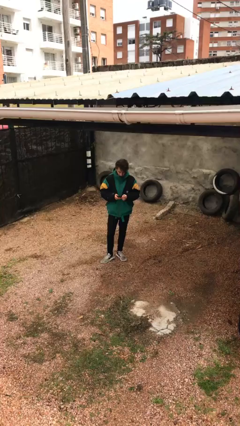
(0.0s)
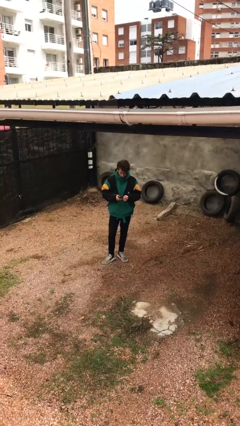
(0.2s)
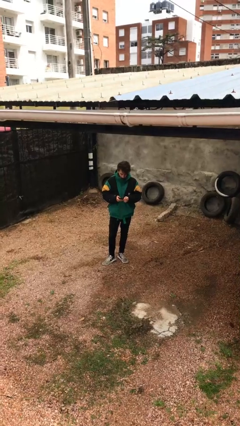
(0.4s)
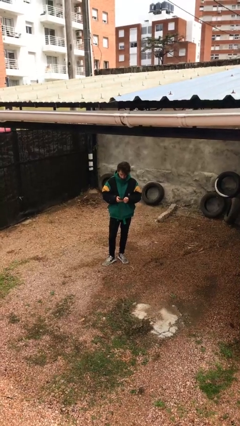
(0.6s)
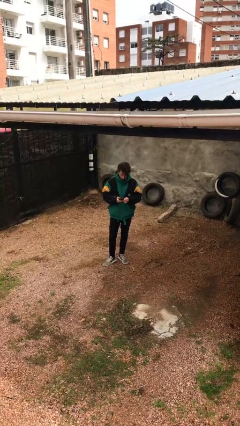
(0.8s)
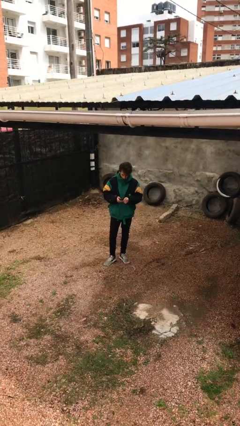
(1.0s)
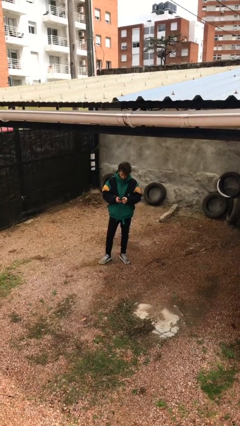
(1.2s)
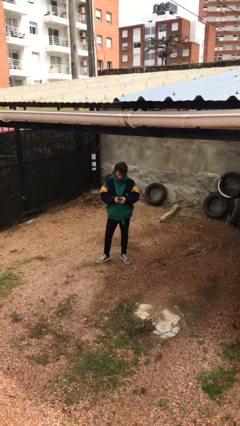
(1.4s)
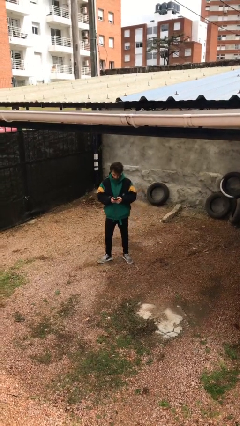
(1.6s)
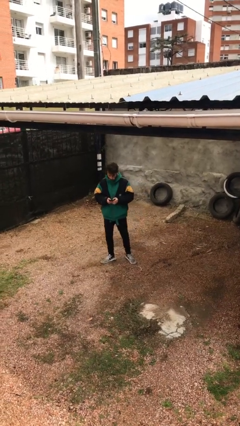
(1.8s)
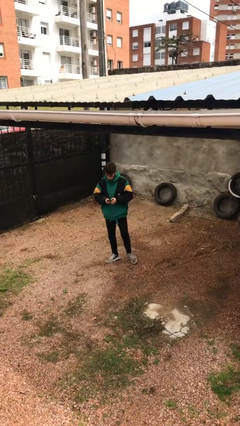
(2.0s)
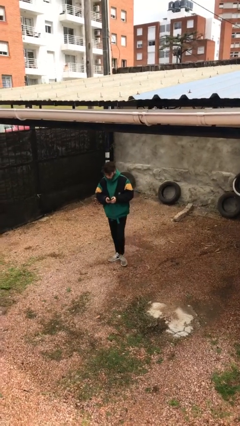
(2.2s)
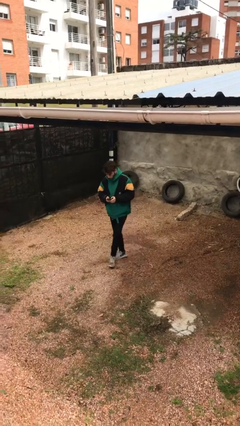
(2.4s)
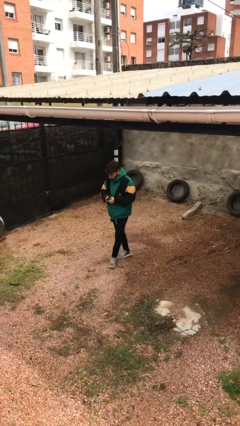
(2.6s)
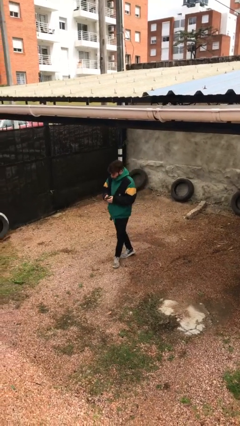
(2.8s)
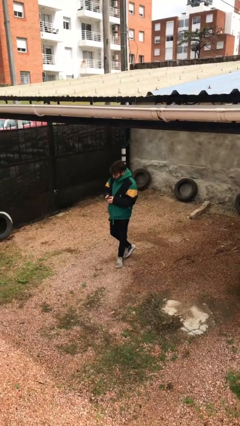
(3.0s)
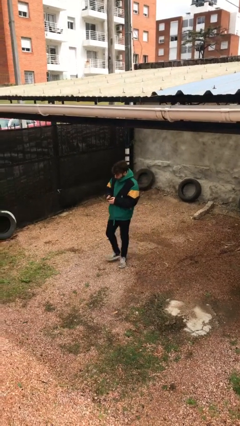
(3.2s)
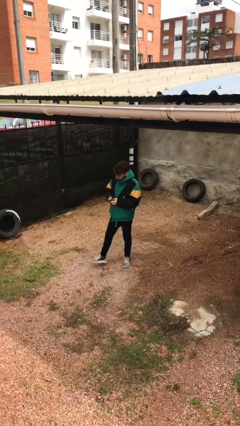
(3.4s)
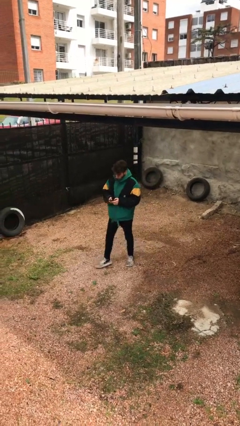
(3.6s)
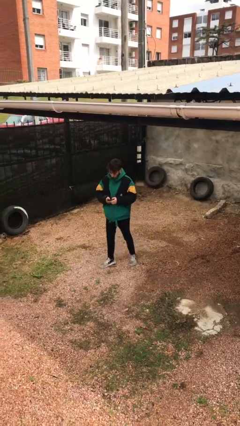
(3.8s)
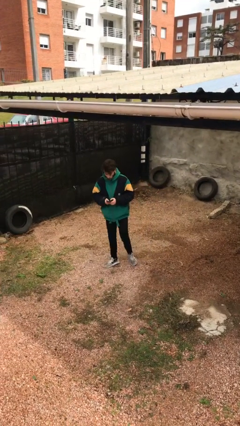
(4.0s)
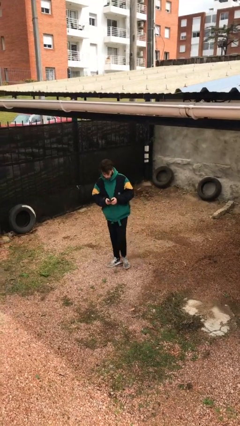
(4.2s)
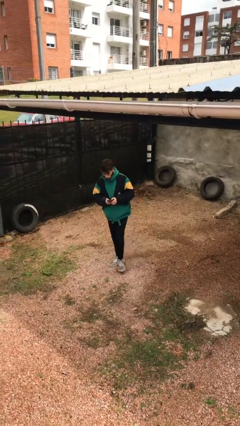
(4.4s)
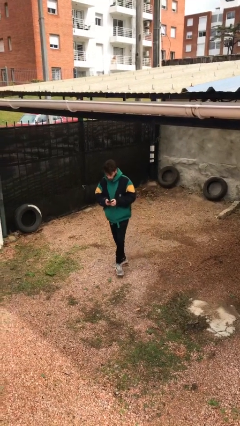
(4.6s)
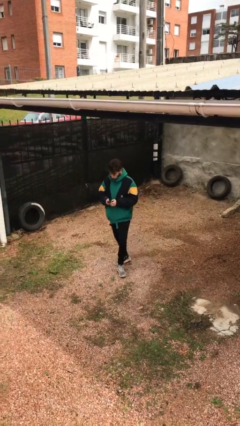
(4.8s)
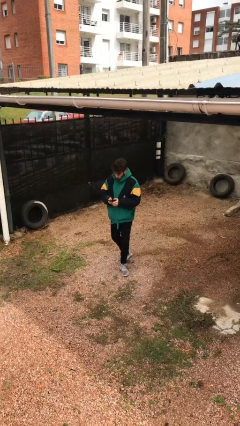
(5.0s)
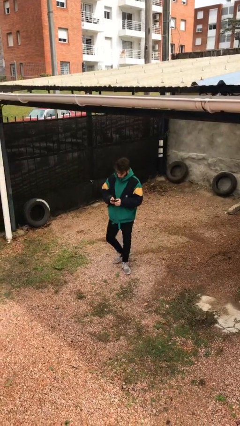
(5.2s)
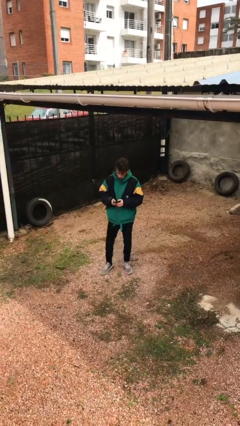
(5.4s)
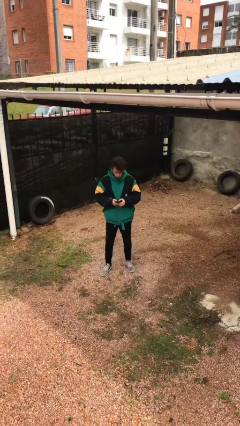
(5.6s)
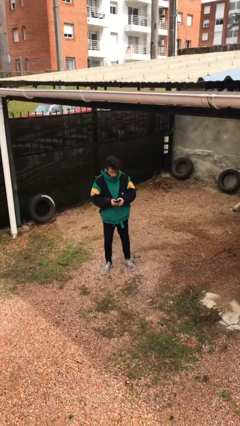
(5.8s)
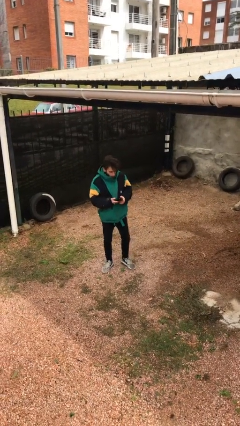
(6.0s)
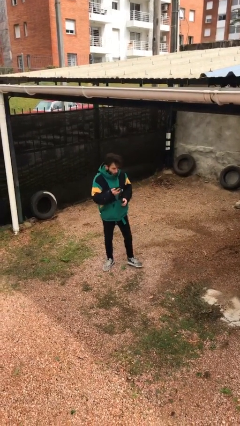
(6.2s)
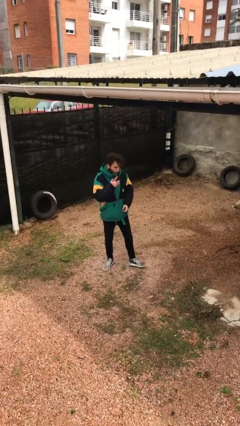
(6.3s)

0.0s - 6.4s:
person texts on phone

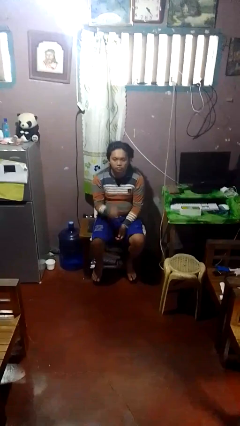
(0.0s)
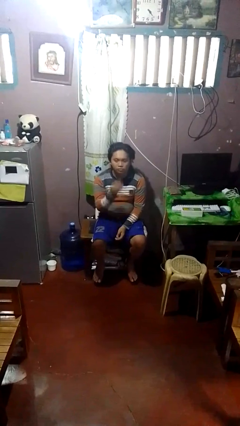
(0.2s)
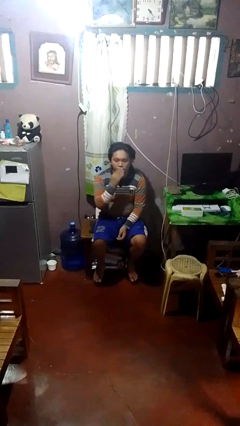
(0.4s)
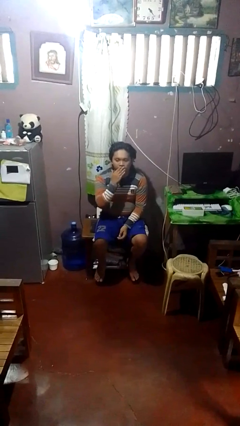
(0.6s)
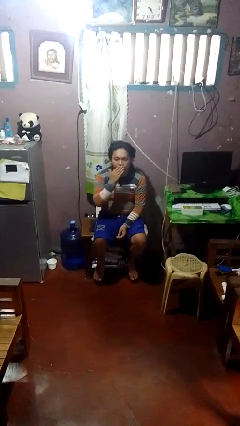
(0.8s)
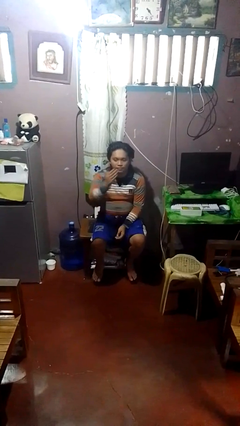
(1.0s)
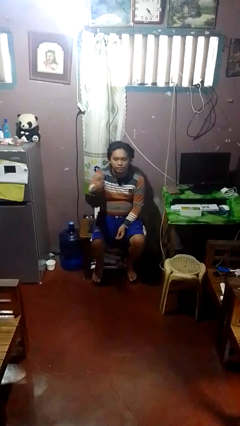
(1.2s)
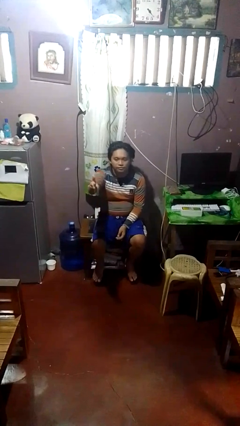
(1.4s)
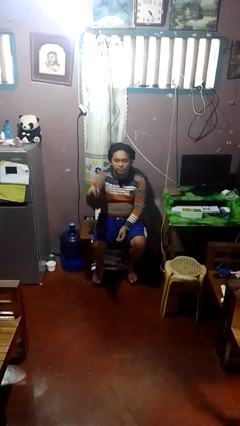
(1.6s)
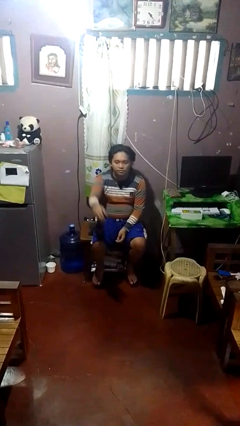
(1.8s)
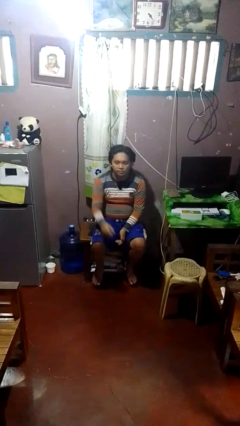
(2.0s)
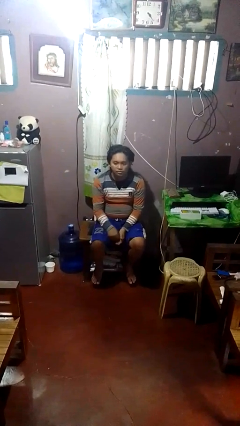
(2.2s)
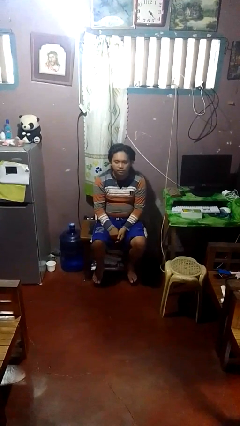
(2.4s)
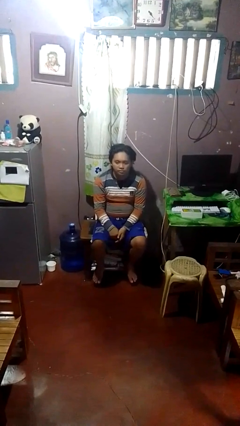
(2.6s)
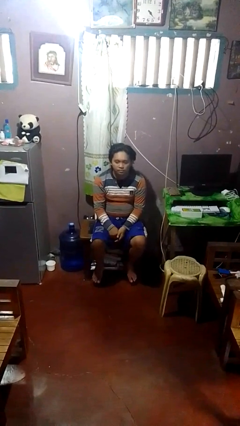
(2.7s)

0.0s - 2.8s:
person gestures blow kiss

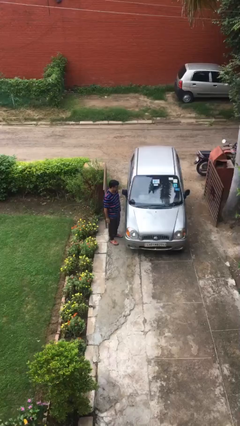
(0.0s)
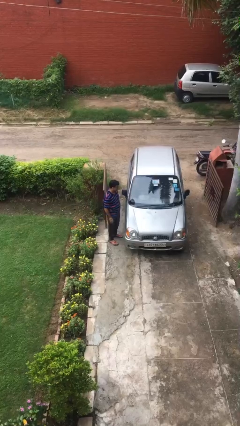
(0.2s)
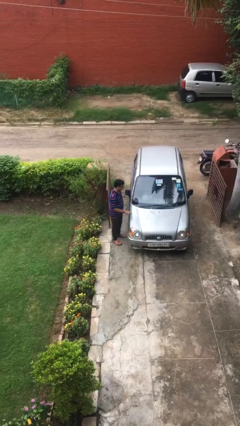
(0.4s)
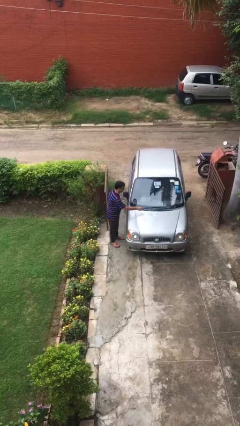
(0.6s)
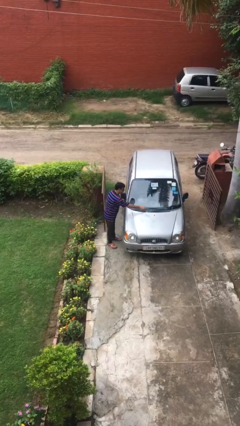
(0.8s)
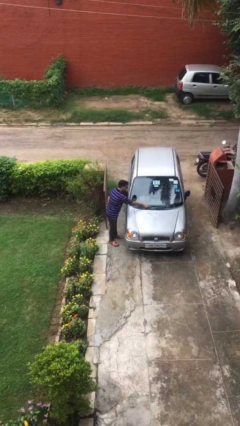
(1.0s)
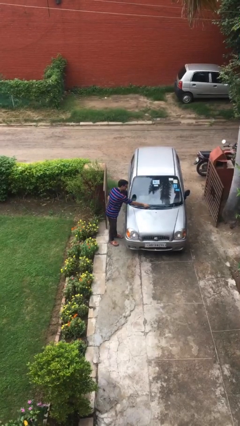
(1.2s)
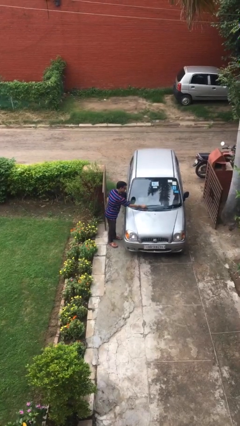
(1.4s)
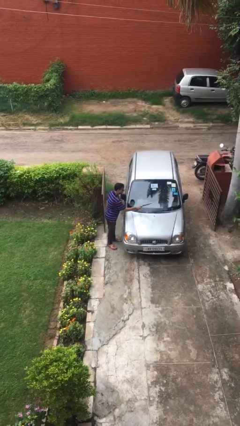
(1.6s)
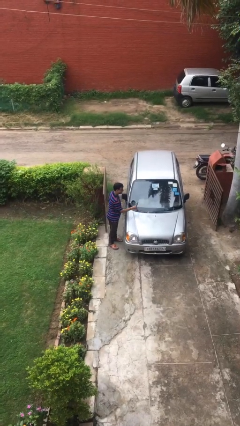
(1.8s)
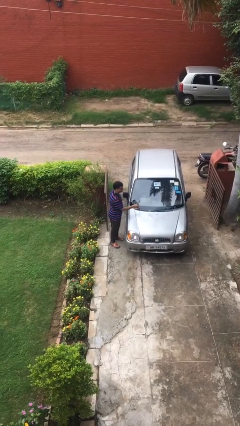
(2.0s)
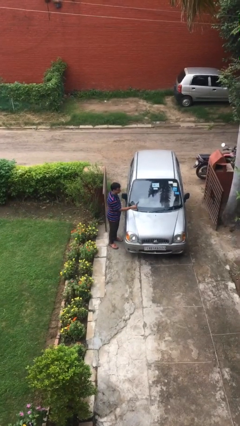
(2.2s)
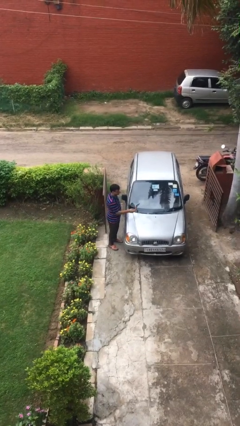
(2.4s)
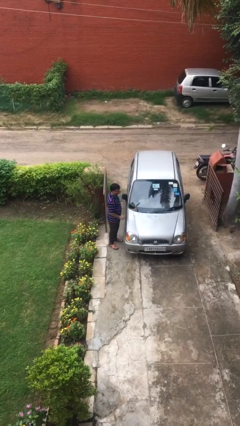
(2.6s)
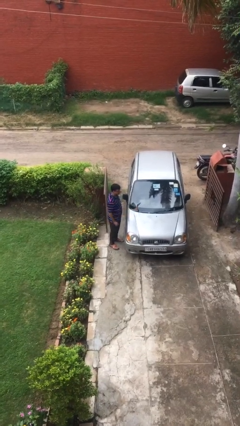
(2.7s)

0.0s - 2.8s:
person flips up car wipers

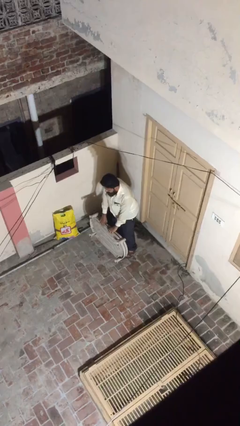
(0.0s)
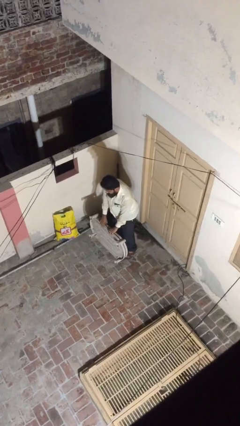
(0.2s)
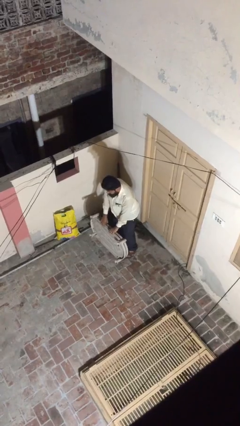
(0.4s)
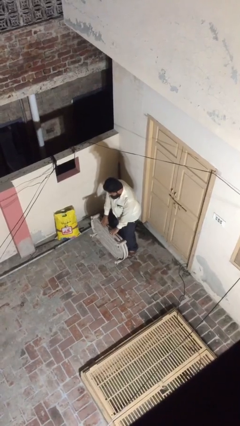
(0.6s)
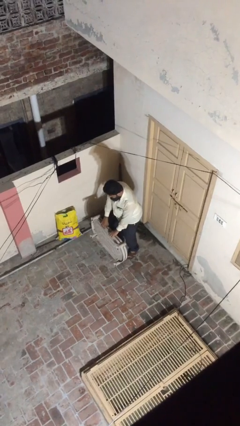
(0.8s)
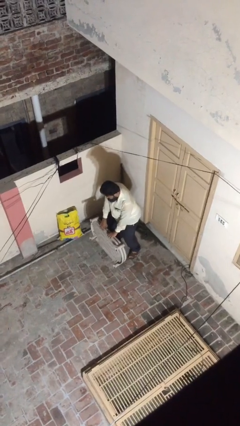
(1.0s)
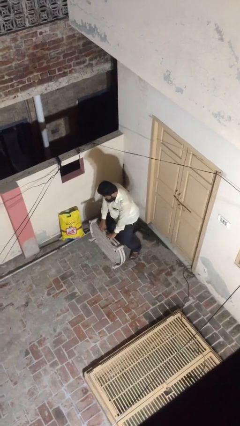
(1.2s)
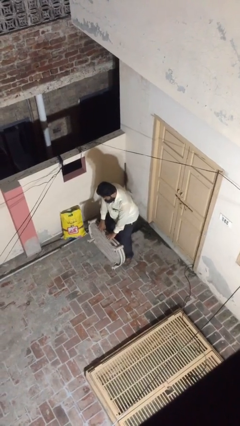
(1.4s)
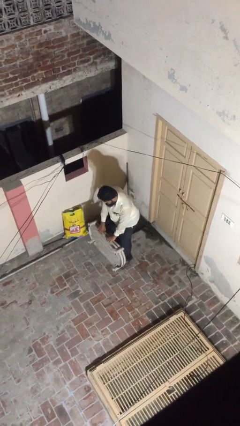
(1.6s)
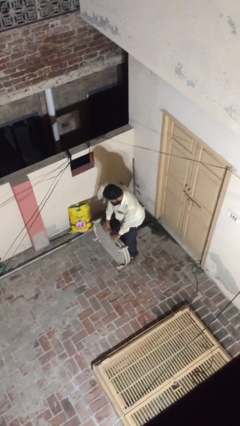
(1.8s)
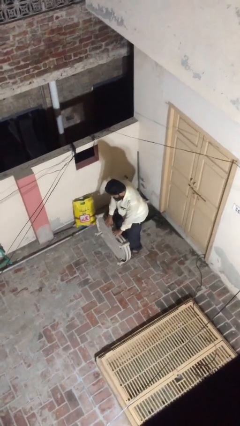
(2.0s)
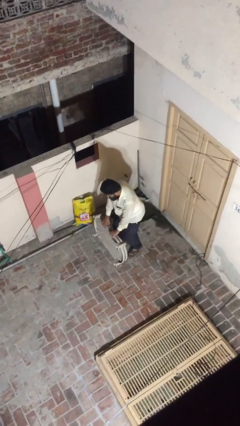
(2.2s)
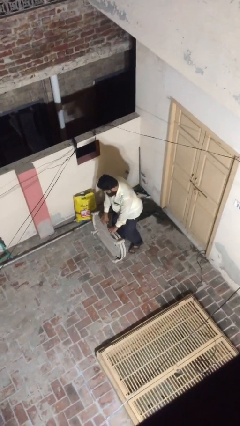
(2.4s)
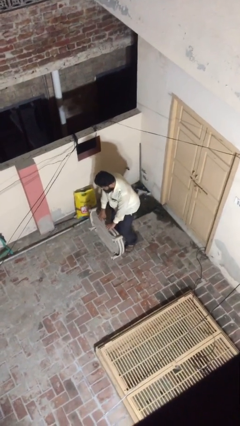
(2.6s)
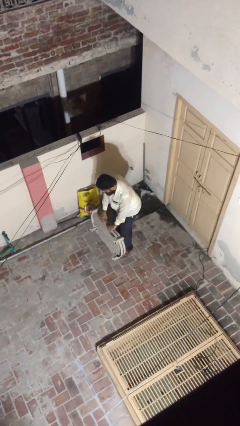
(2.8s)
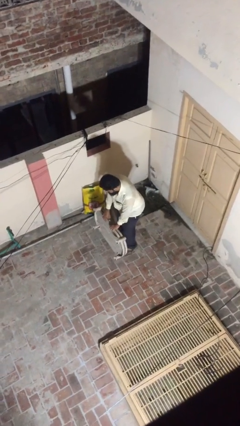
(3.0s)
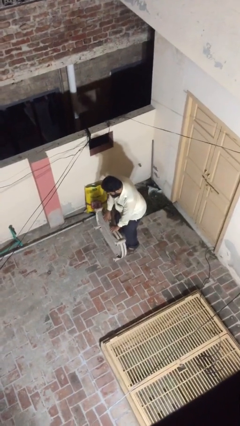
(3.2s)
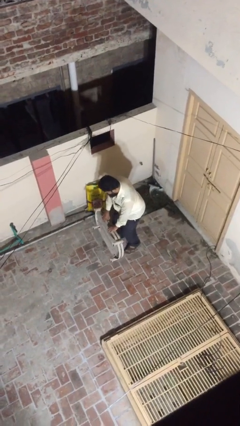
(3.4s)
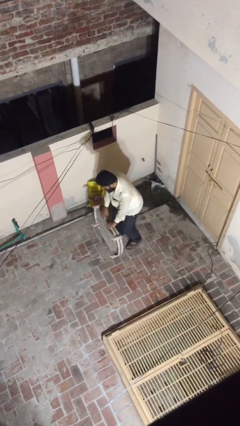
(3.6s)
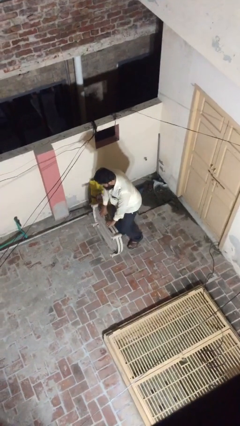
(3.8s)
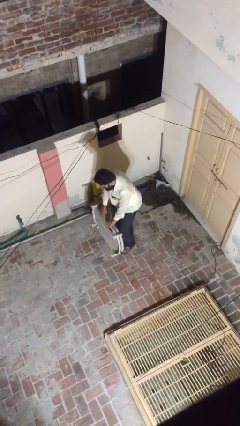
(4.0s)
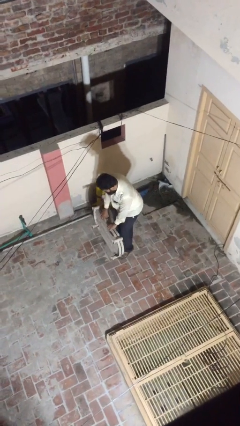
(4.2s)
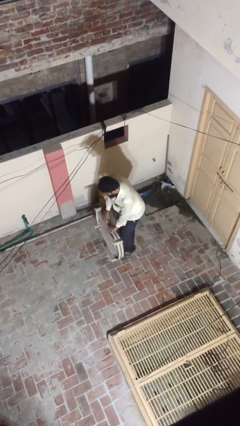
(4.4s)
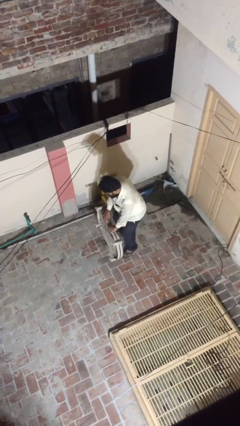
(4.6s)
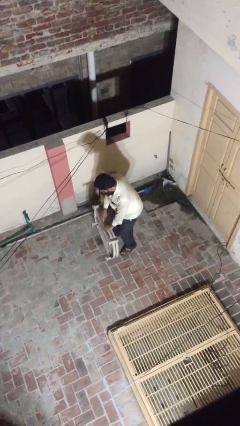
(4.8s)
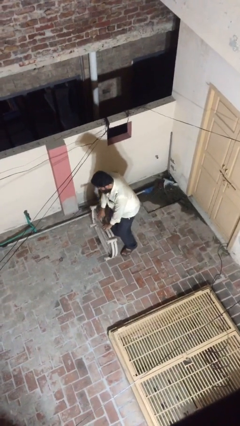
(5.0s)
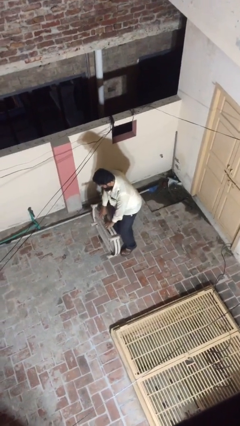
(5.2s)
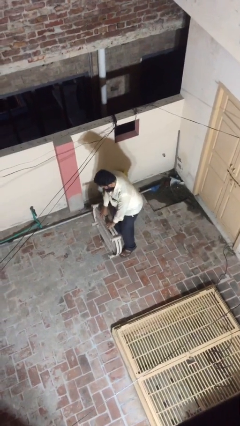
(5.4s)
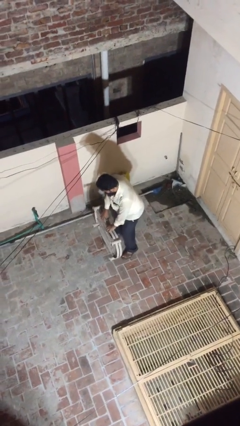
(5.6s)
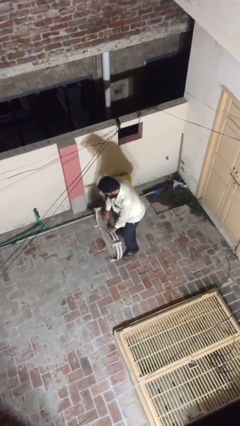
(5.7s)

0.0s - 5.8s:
person carries heavy object
